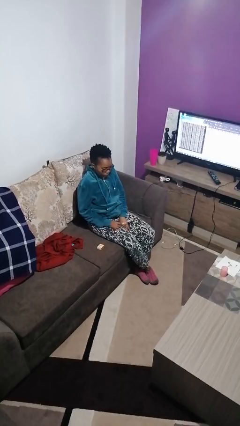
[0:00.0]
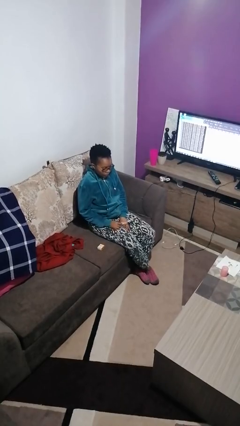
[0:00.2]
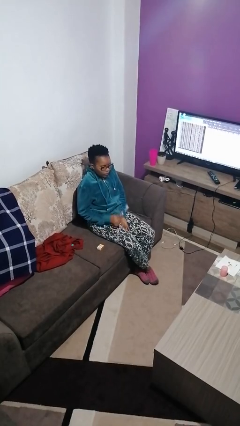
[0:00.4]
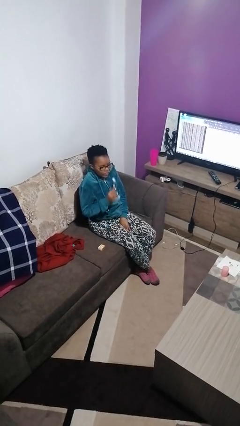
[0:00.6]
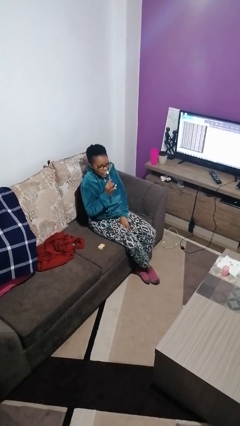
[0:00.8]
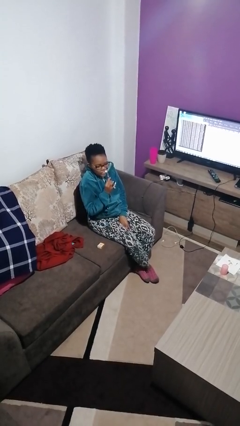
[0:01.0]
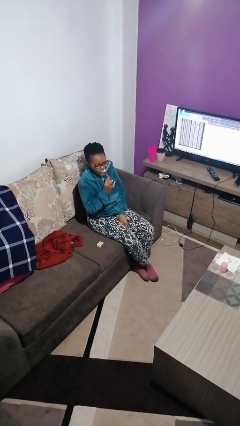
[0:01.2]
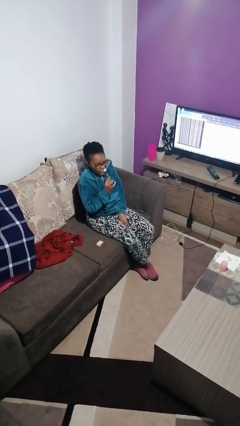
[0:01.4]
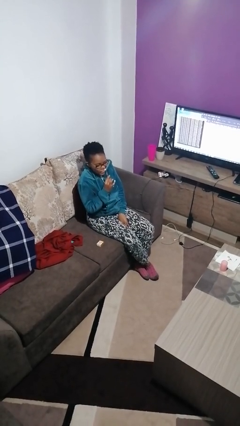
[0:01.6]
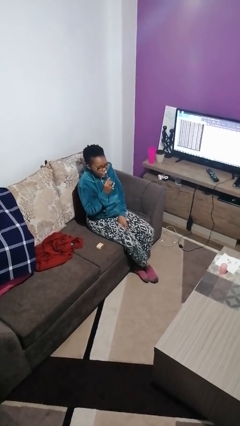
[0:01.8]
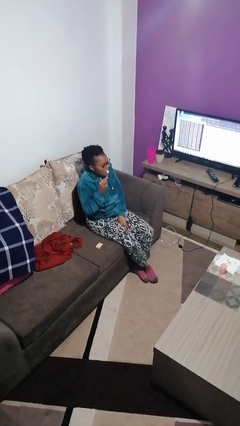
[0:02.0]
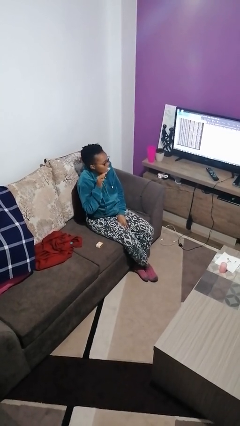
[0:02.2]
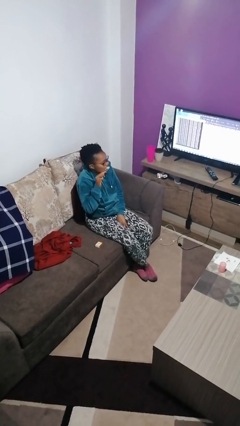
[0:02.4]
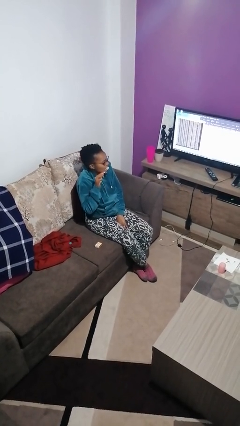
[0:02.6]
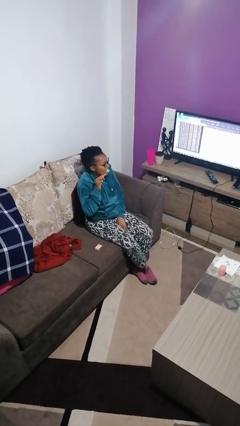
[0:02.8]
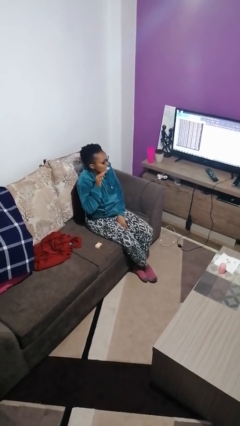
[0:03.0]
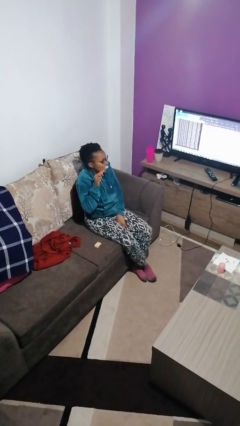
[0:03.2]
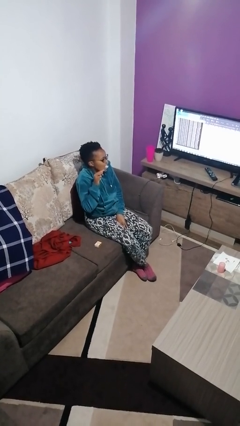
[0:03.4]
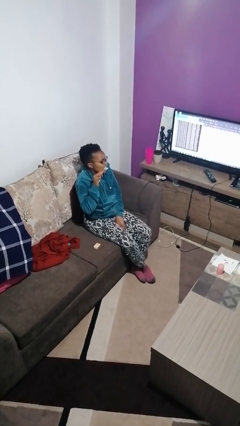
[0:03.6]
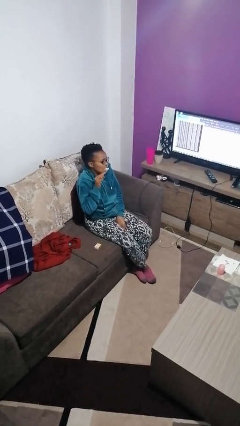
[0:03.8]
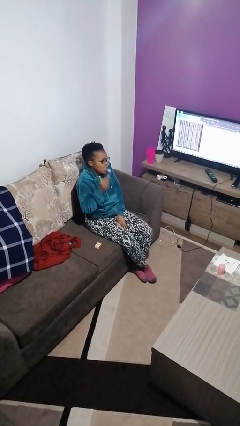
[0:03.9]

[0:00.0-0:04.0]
person brushes teeth

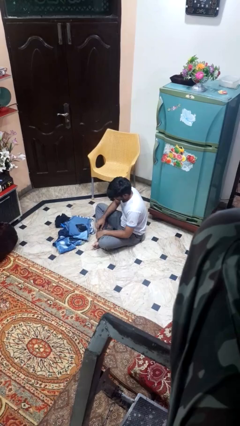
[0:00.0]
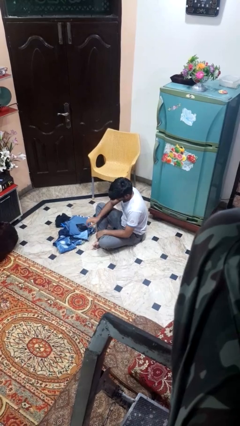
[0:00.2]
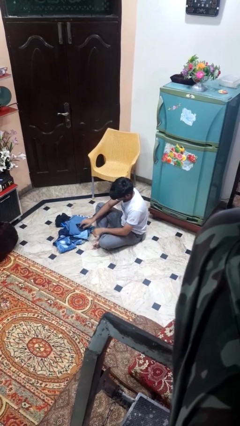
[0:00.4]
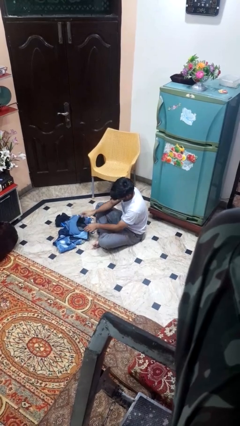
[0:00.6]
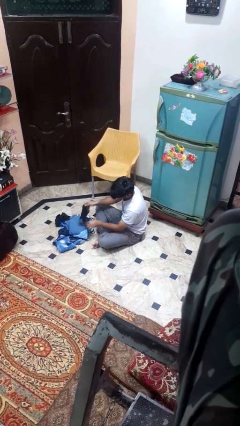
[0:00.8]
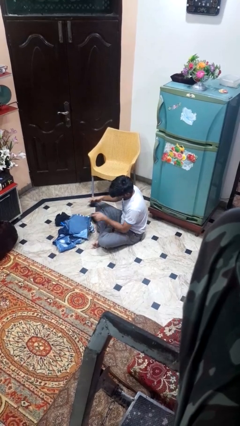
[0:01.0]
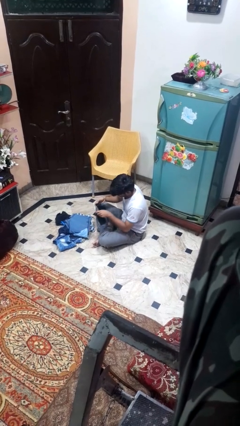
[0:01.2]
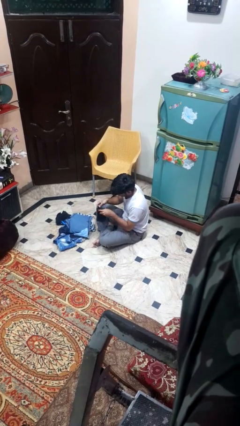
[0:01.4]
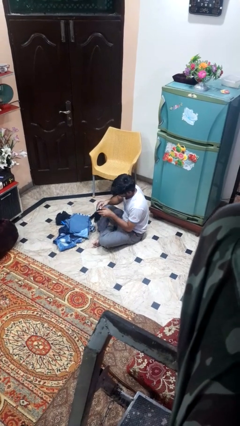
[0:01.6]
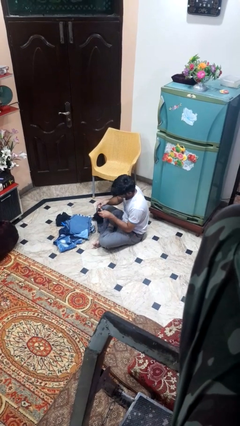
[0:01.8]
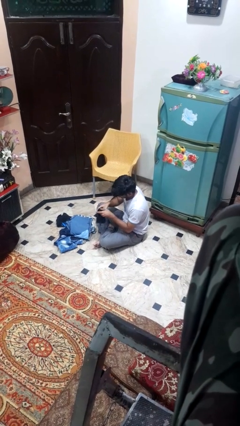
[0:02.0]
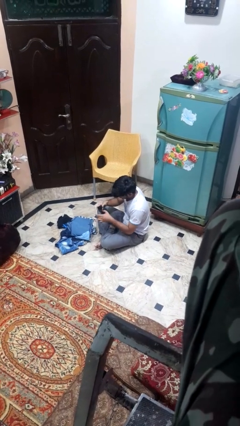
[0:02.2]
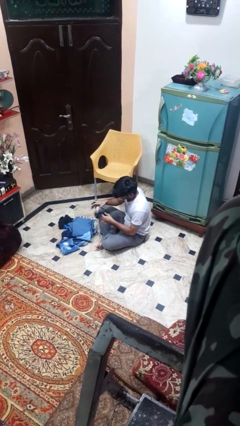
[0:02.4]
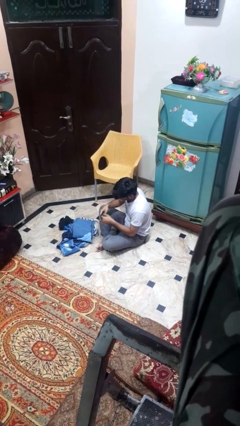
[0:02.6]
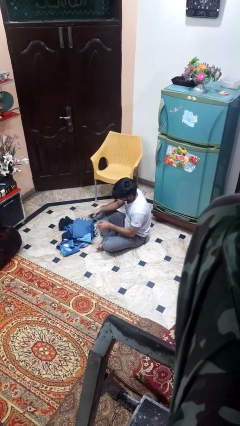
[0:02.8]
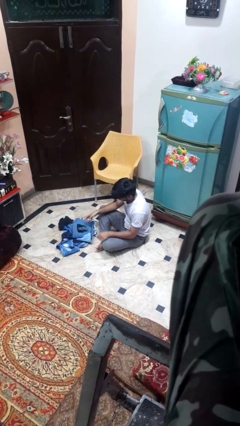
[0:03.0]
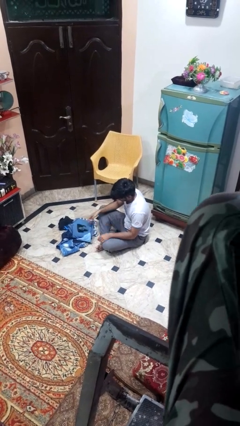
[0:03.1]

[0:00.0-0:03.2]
person folds socks

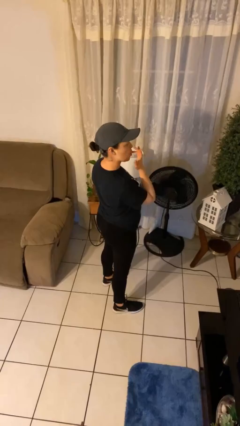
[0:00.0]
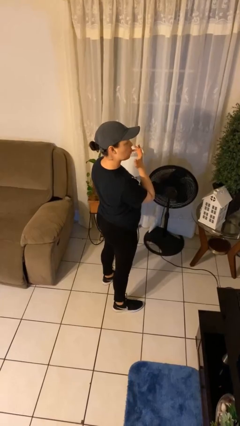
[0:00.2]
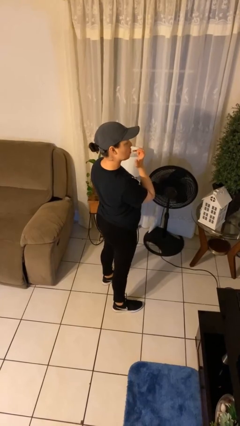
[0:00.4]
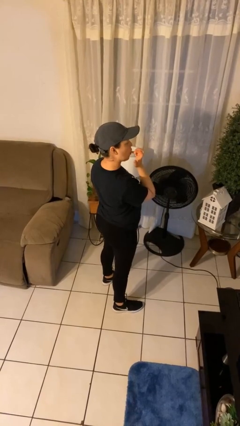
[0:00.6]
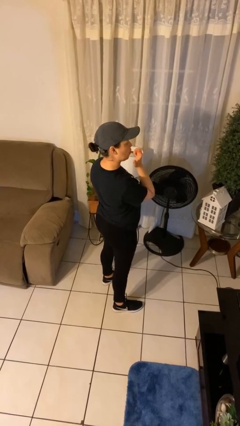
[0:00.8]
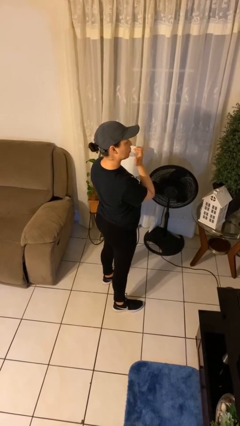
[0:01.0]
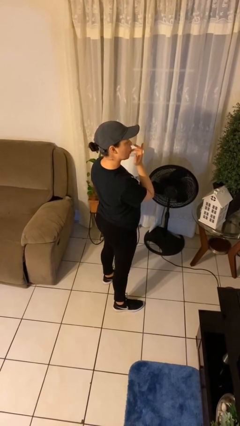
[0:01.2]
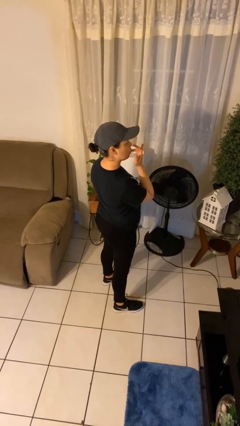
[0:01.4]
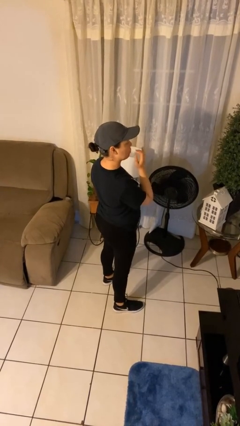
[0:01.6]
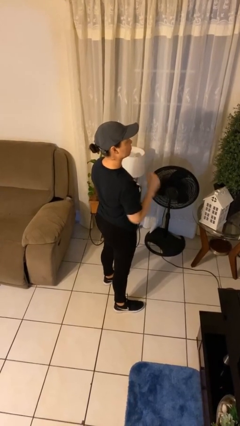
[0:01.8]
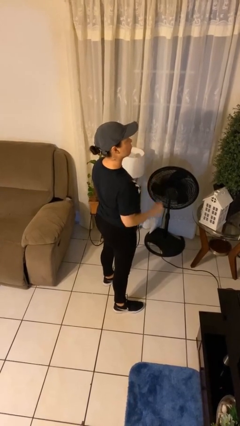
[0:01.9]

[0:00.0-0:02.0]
person licks fingers

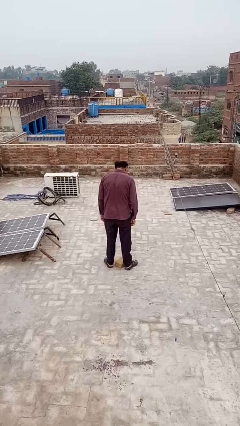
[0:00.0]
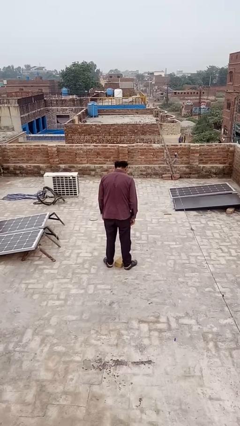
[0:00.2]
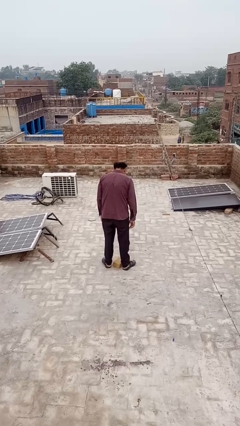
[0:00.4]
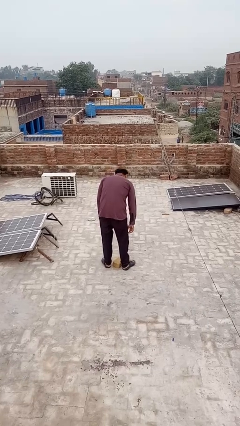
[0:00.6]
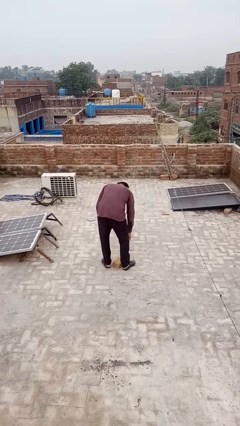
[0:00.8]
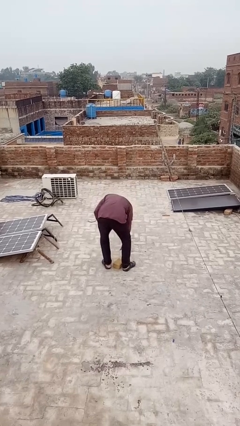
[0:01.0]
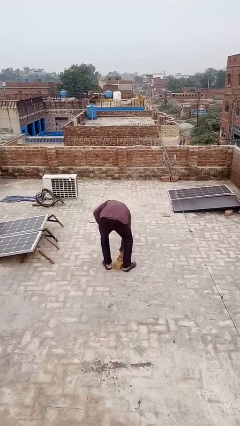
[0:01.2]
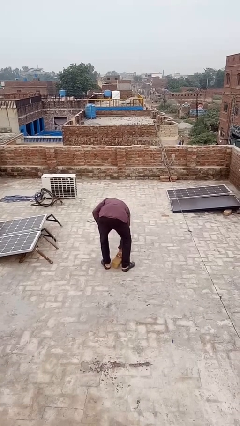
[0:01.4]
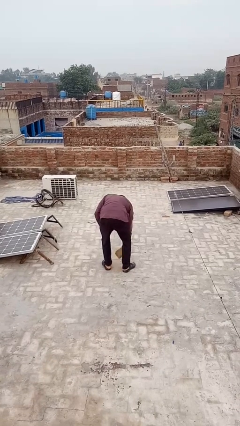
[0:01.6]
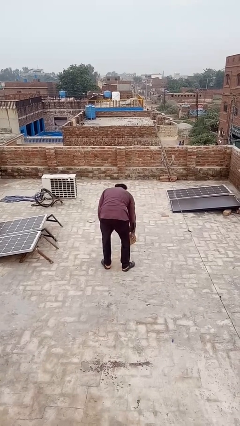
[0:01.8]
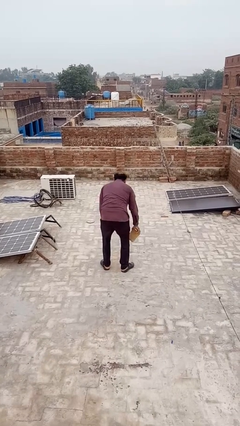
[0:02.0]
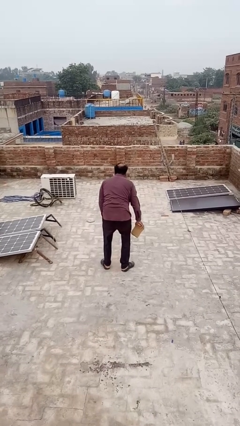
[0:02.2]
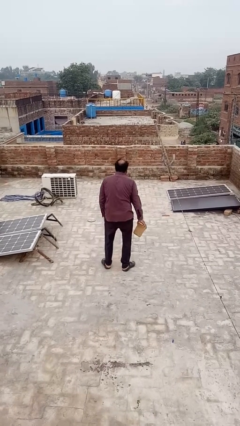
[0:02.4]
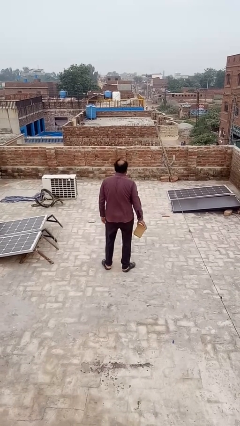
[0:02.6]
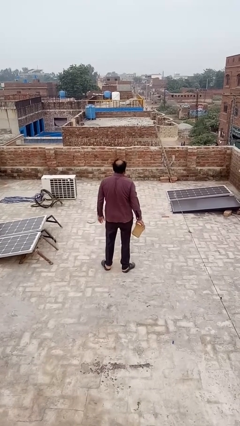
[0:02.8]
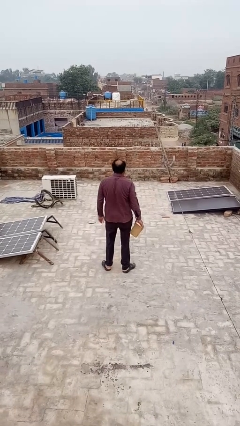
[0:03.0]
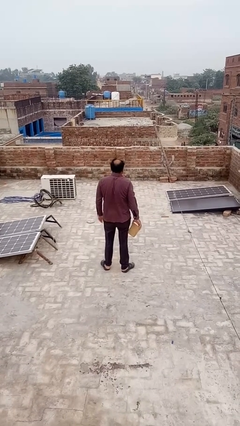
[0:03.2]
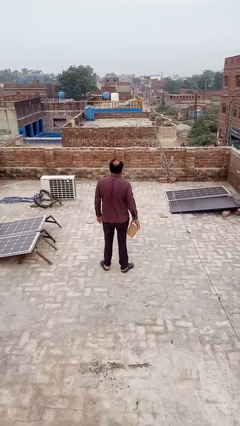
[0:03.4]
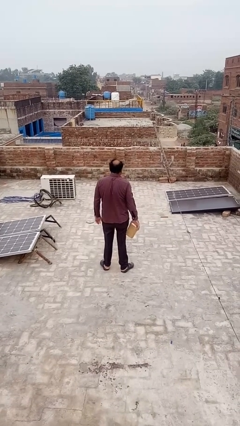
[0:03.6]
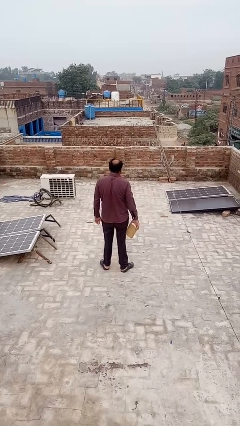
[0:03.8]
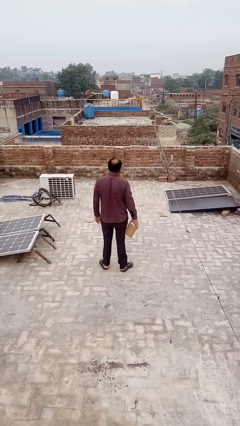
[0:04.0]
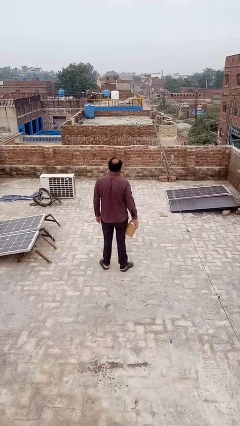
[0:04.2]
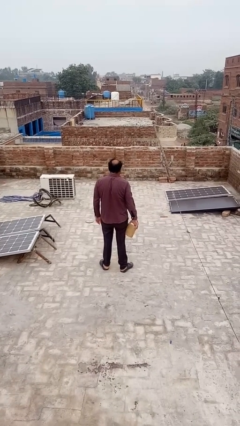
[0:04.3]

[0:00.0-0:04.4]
person picks up object from floor

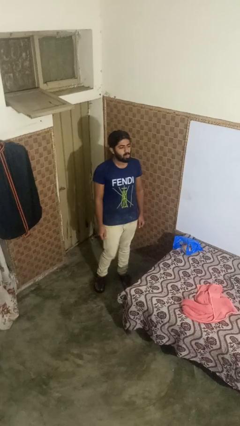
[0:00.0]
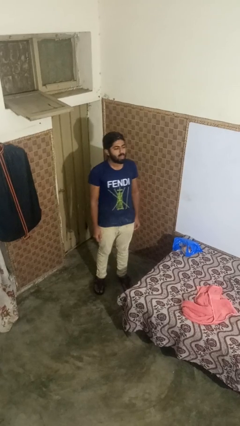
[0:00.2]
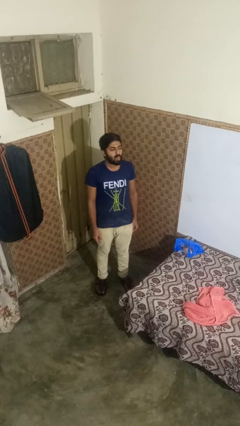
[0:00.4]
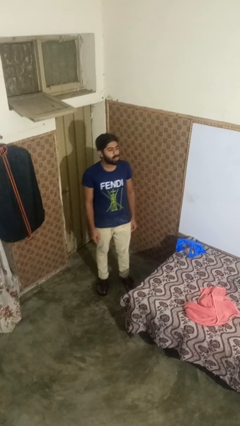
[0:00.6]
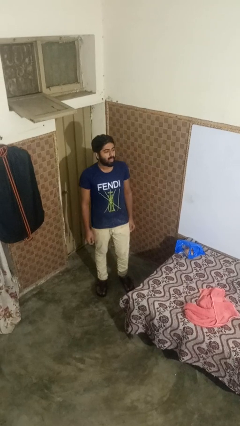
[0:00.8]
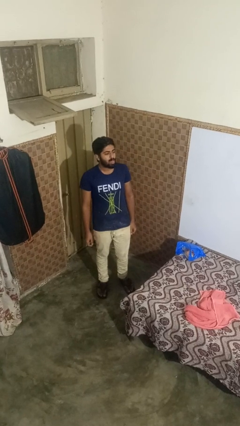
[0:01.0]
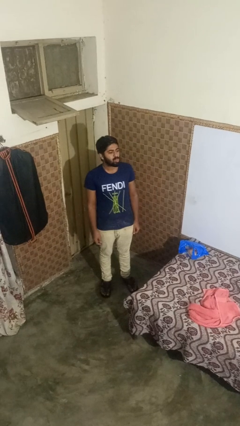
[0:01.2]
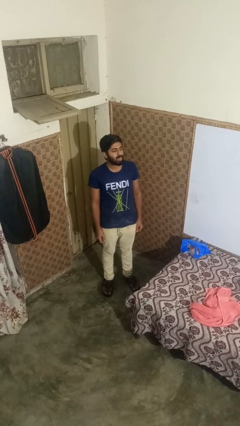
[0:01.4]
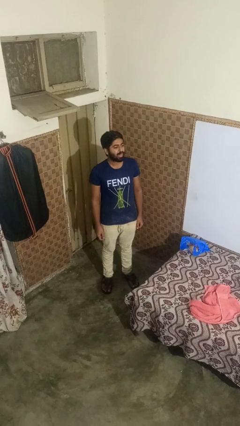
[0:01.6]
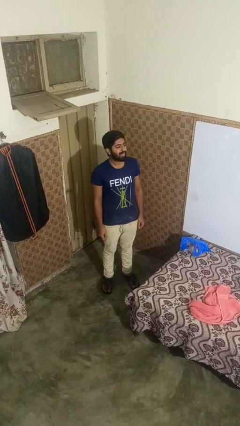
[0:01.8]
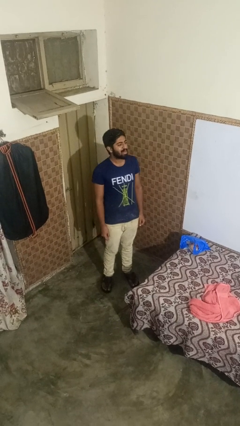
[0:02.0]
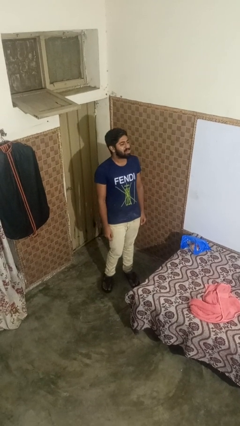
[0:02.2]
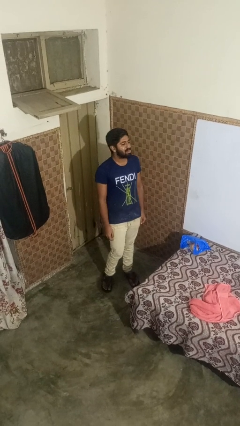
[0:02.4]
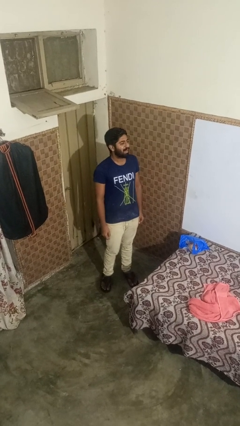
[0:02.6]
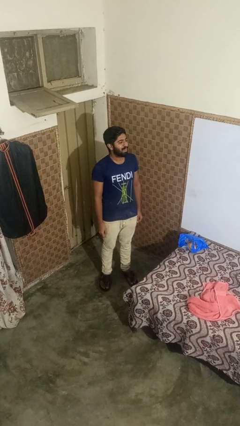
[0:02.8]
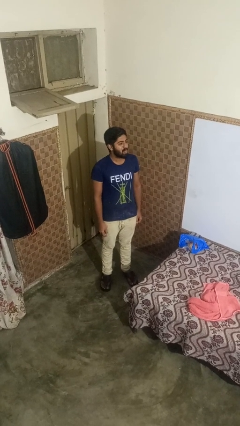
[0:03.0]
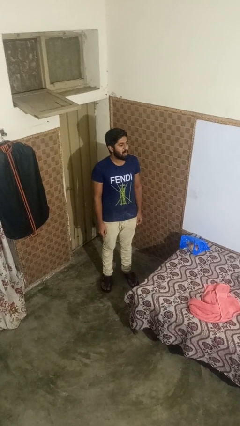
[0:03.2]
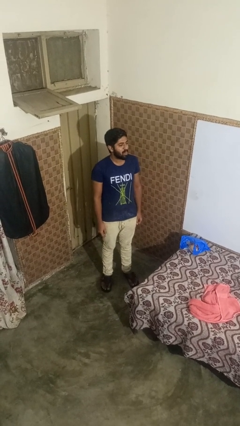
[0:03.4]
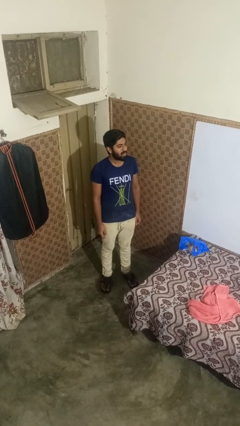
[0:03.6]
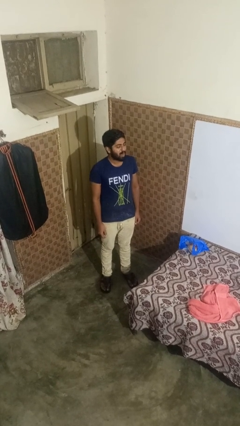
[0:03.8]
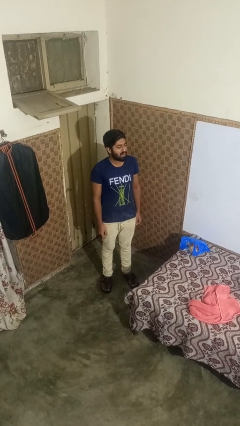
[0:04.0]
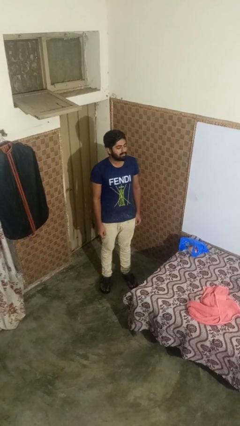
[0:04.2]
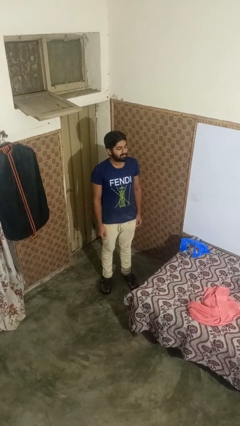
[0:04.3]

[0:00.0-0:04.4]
person sticks out tongue
